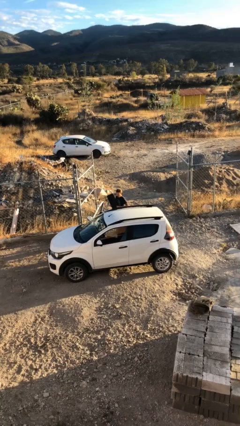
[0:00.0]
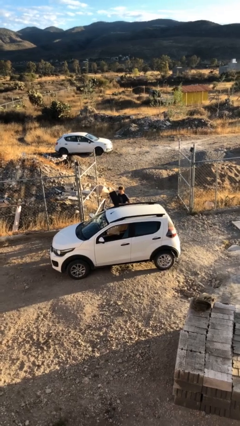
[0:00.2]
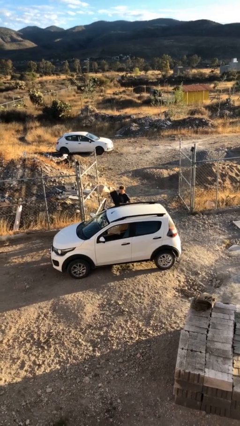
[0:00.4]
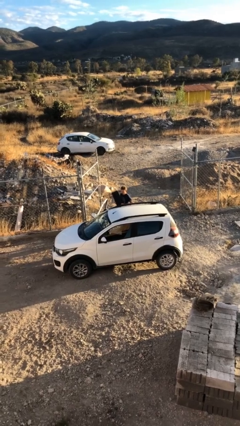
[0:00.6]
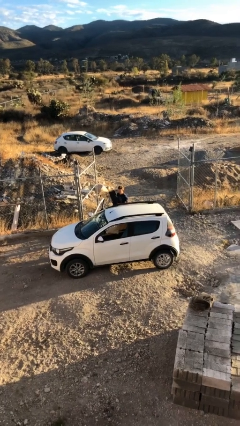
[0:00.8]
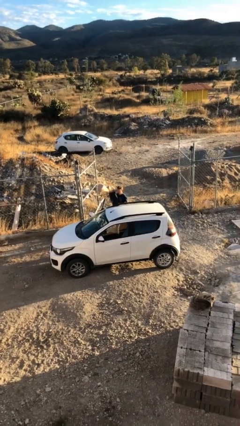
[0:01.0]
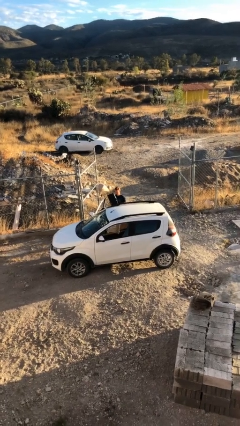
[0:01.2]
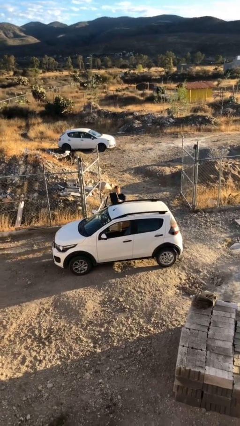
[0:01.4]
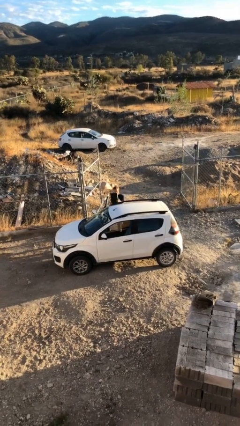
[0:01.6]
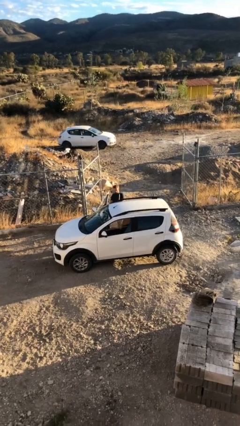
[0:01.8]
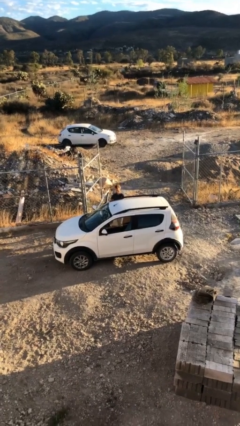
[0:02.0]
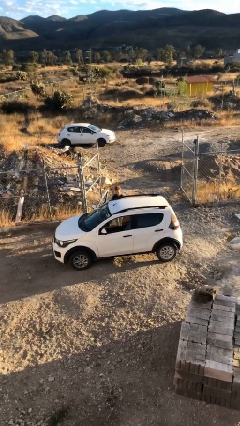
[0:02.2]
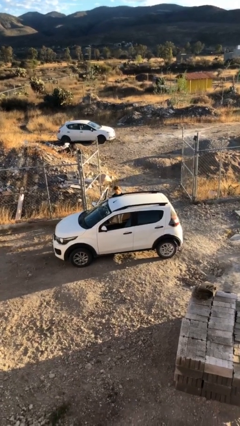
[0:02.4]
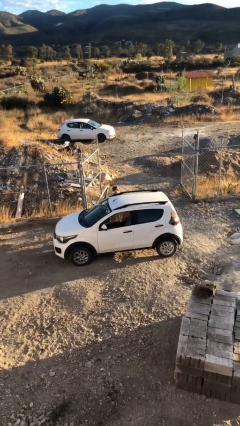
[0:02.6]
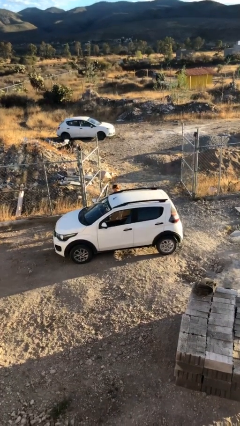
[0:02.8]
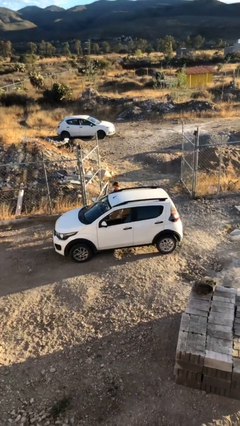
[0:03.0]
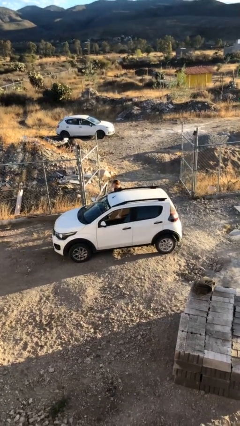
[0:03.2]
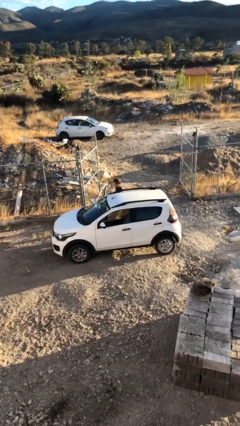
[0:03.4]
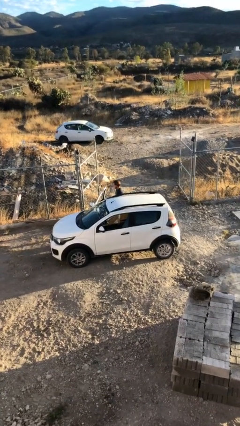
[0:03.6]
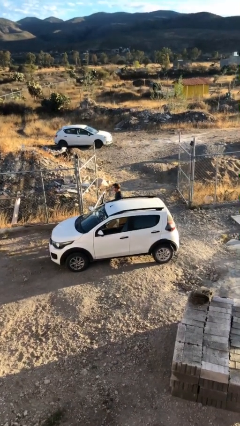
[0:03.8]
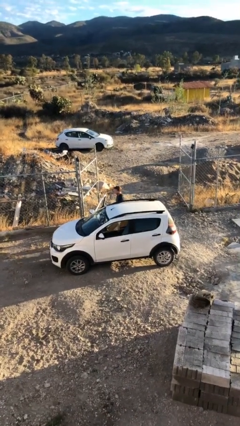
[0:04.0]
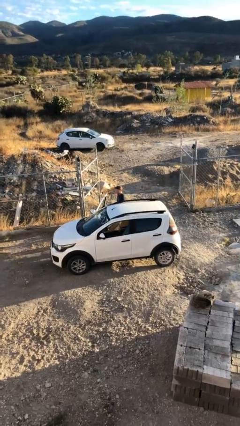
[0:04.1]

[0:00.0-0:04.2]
person loads car

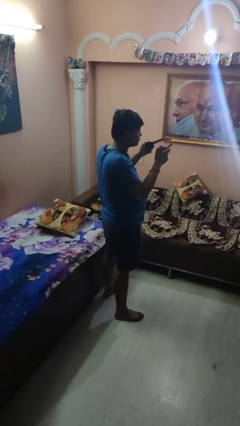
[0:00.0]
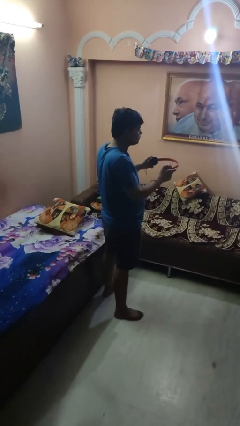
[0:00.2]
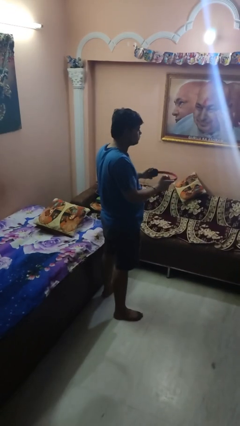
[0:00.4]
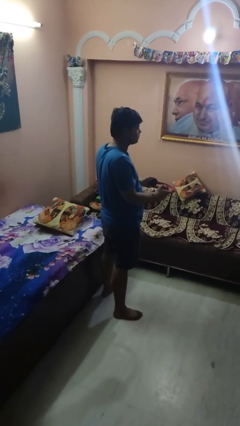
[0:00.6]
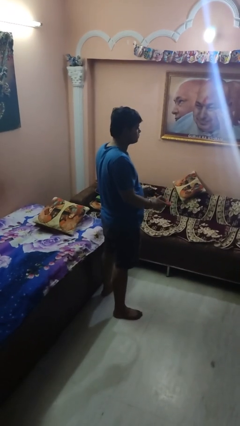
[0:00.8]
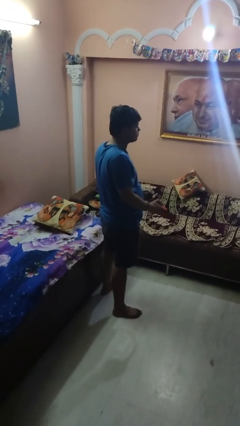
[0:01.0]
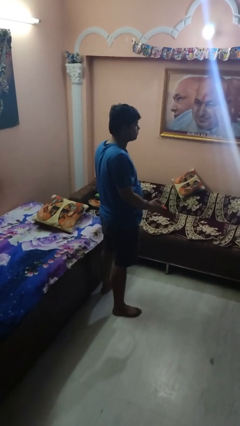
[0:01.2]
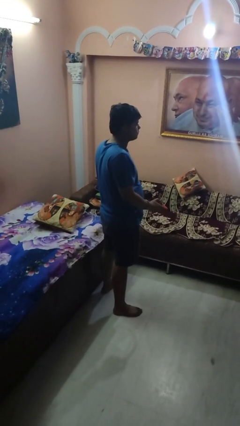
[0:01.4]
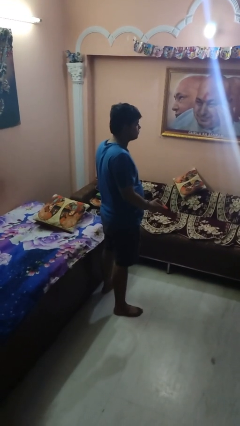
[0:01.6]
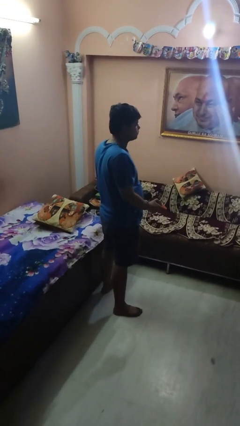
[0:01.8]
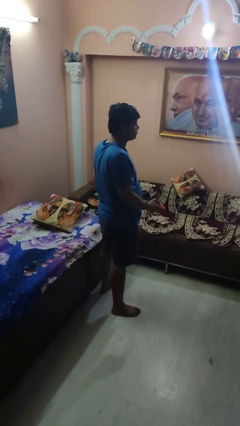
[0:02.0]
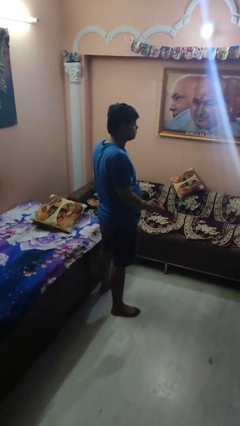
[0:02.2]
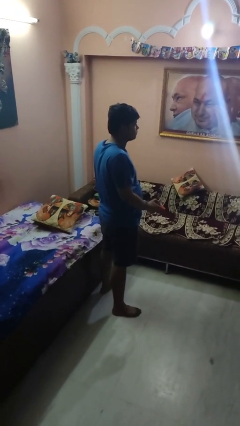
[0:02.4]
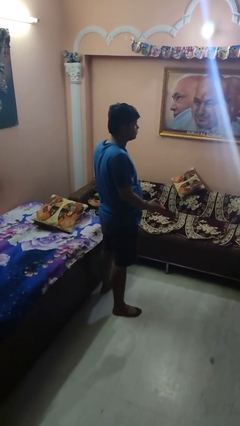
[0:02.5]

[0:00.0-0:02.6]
person takes off headphones

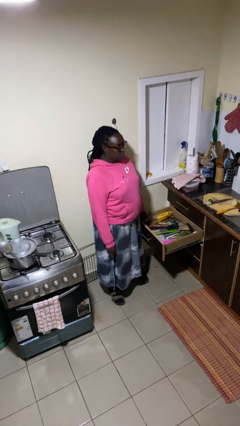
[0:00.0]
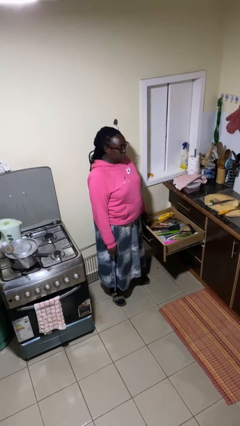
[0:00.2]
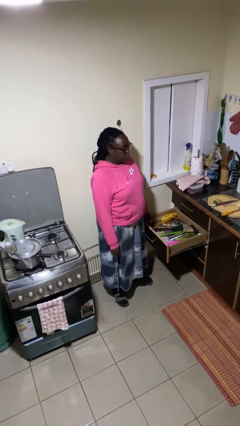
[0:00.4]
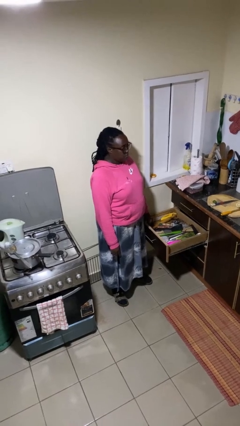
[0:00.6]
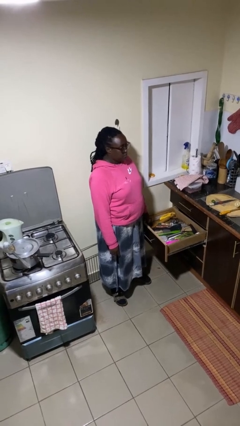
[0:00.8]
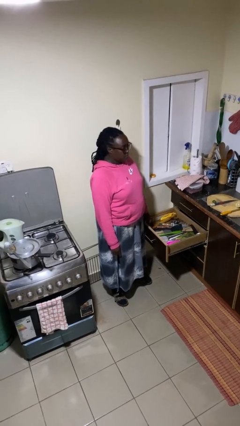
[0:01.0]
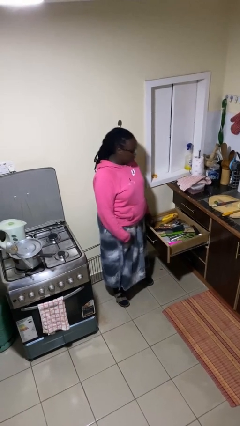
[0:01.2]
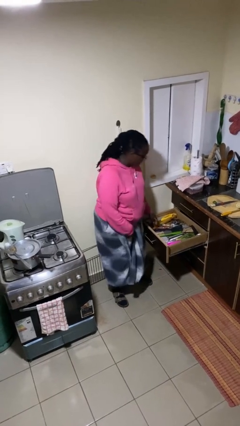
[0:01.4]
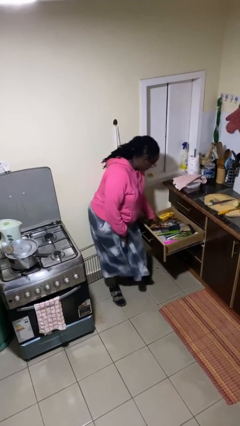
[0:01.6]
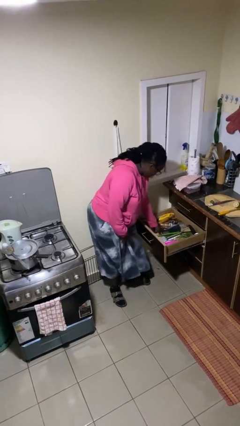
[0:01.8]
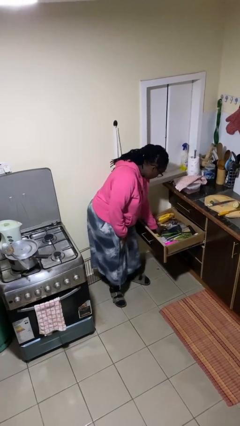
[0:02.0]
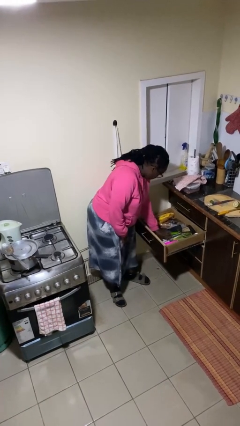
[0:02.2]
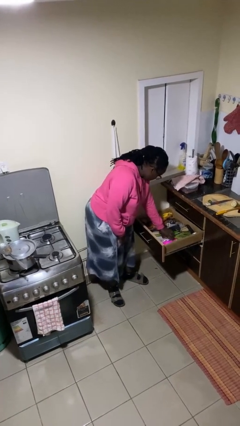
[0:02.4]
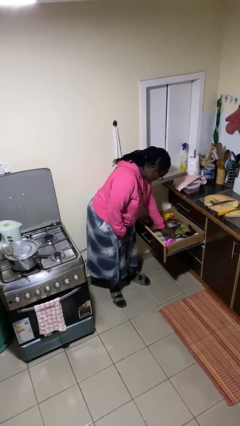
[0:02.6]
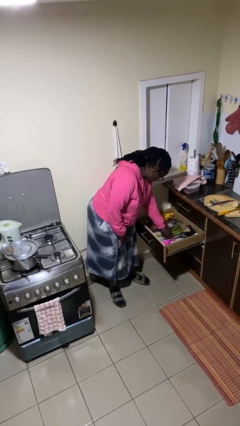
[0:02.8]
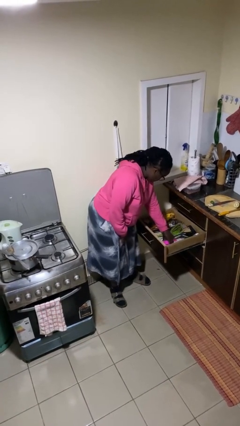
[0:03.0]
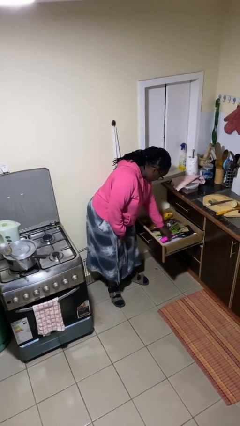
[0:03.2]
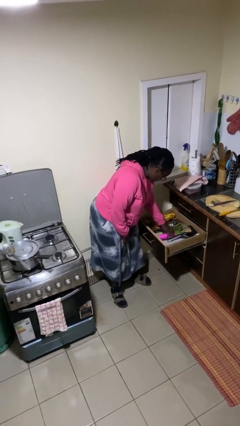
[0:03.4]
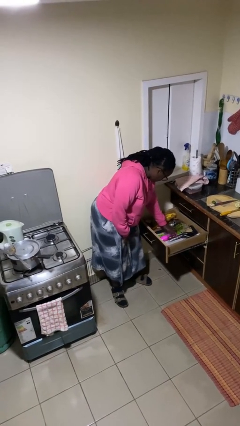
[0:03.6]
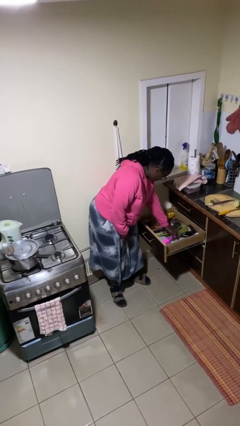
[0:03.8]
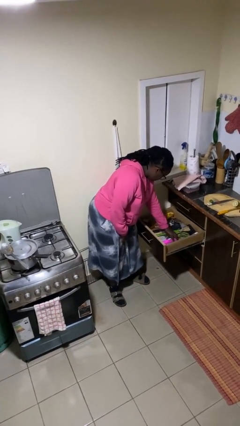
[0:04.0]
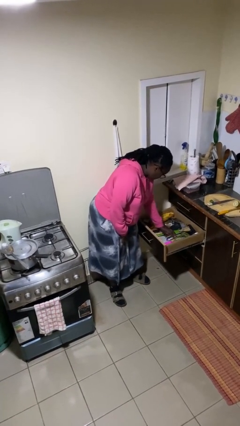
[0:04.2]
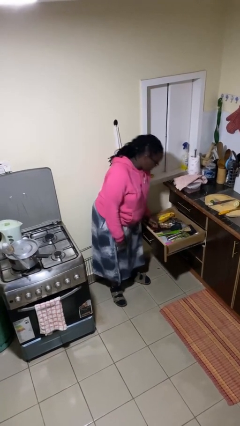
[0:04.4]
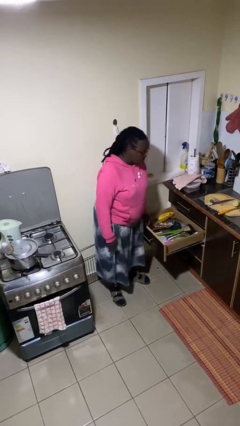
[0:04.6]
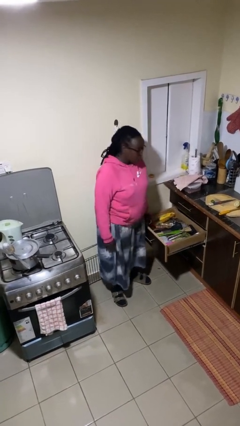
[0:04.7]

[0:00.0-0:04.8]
person searches in kitchen drawer

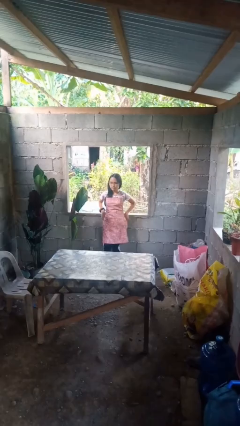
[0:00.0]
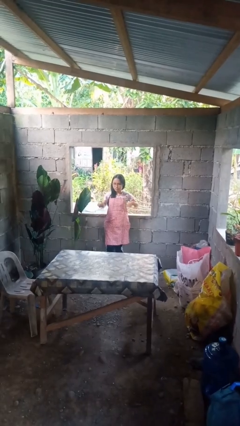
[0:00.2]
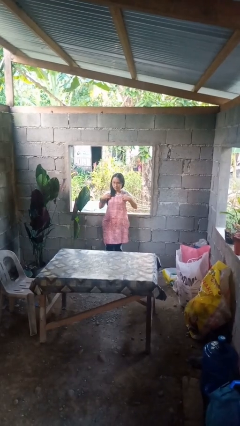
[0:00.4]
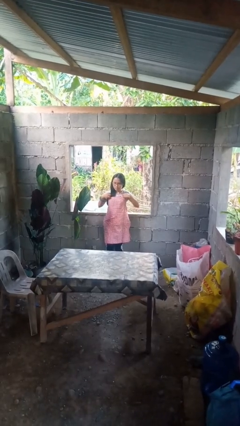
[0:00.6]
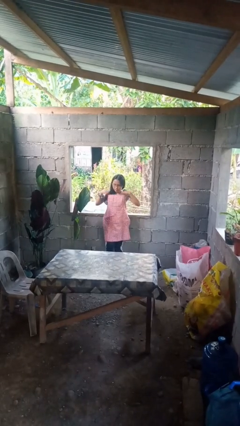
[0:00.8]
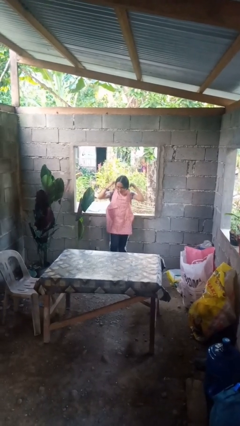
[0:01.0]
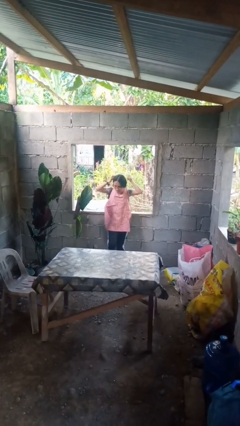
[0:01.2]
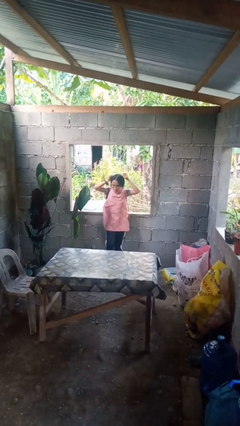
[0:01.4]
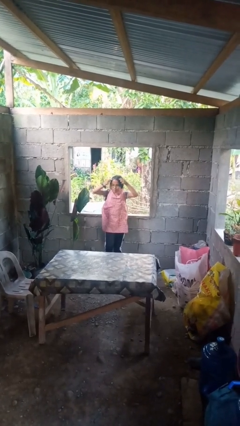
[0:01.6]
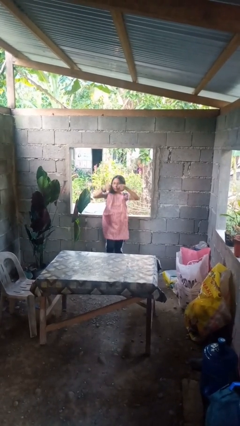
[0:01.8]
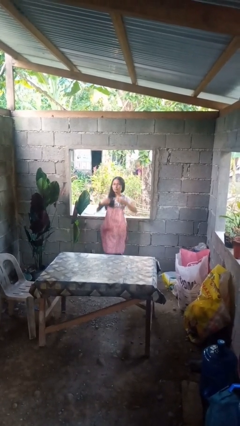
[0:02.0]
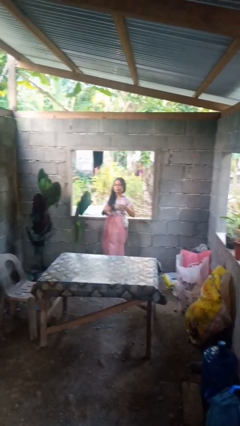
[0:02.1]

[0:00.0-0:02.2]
person takes off apron

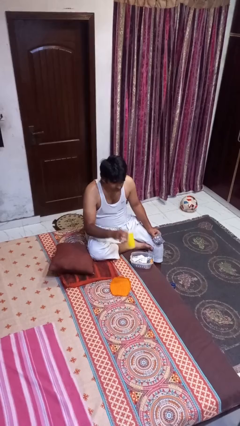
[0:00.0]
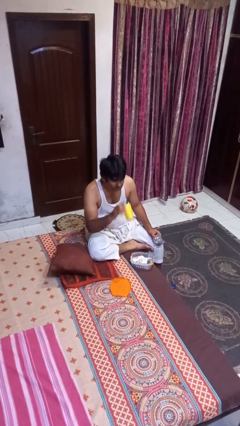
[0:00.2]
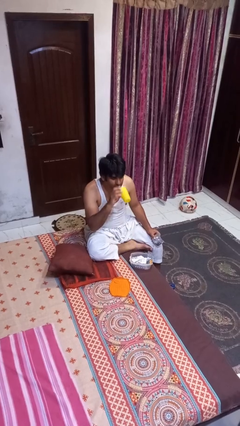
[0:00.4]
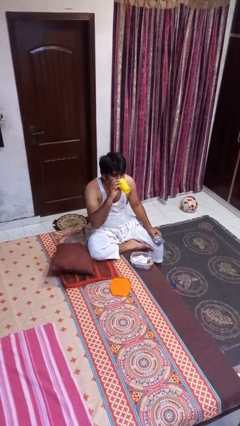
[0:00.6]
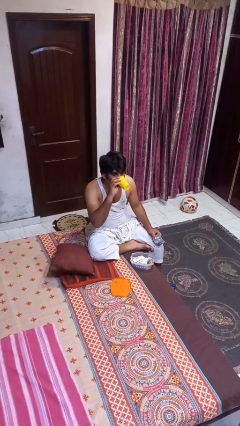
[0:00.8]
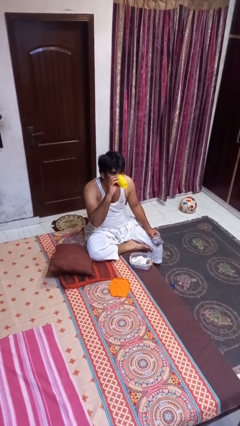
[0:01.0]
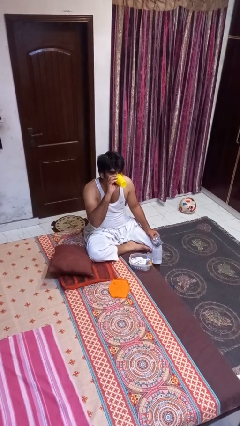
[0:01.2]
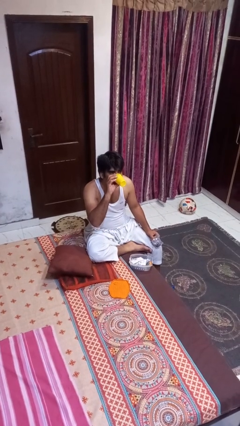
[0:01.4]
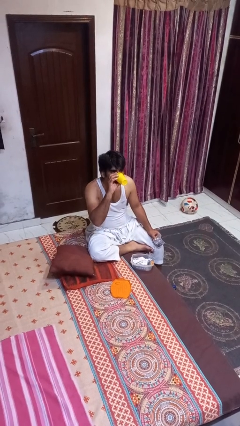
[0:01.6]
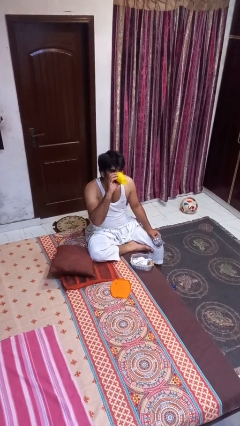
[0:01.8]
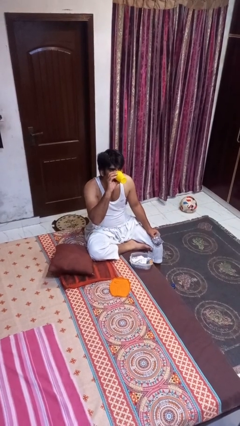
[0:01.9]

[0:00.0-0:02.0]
person drinks from cup

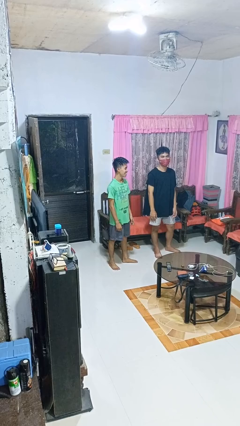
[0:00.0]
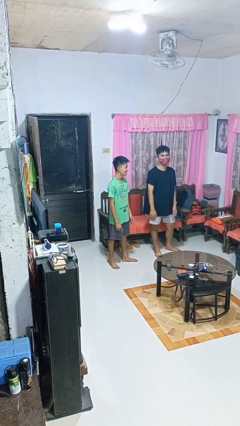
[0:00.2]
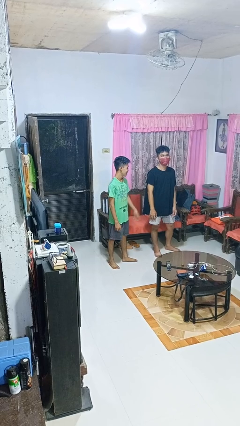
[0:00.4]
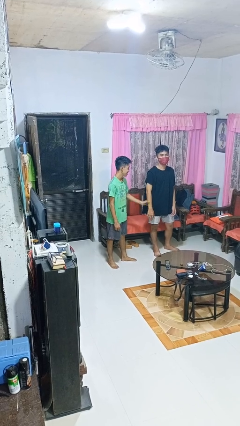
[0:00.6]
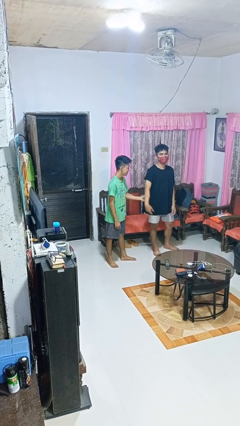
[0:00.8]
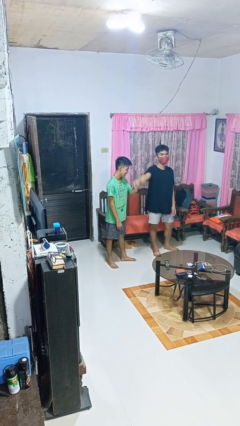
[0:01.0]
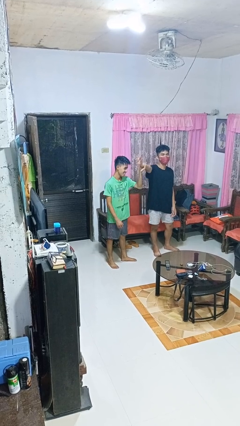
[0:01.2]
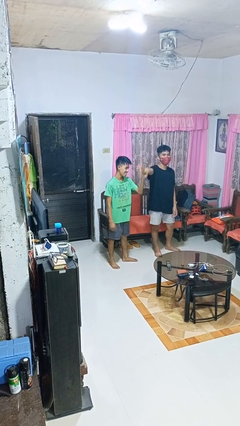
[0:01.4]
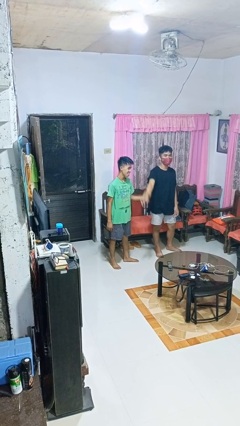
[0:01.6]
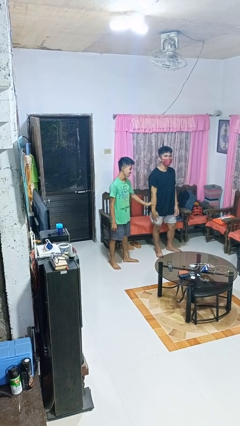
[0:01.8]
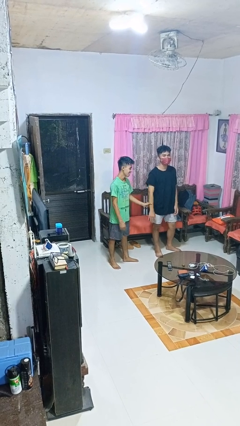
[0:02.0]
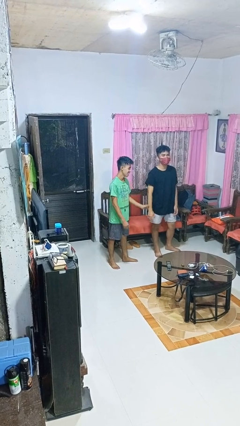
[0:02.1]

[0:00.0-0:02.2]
person grabs person by forearm
